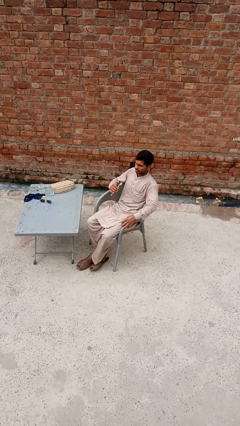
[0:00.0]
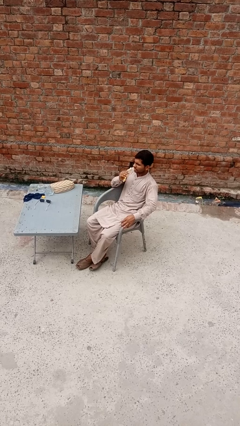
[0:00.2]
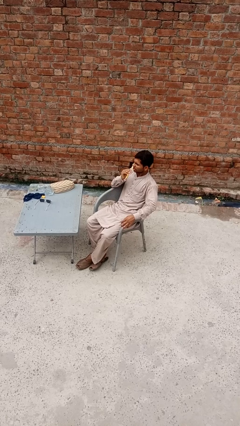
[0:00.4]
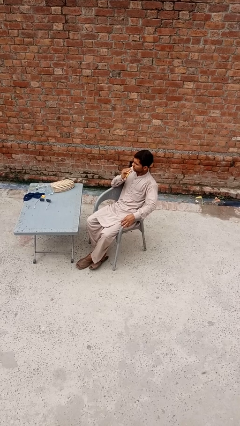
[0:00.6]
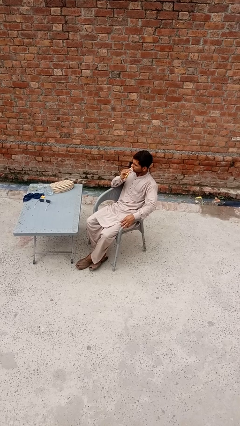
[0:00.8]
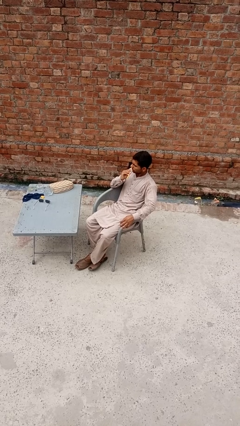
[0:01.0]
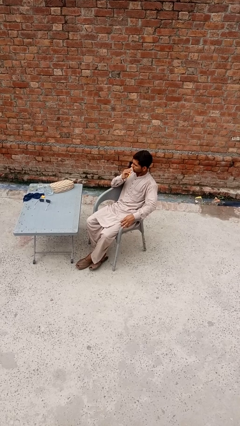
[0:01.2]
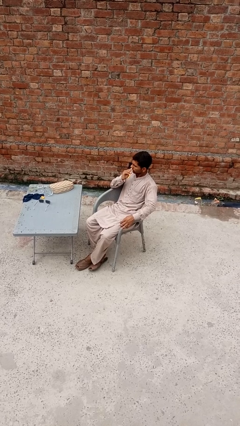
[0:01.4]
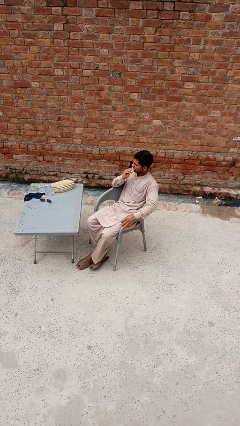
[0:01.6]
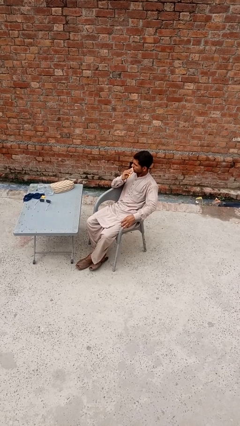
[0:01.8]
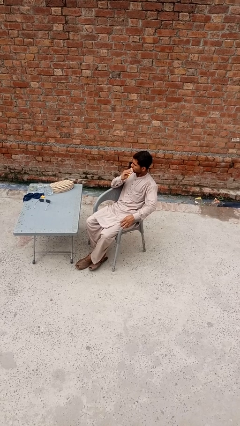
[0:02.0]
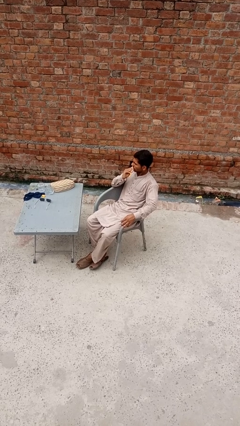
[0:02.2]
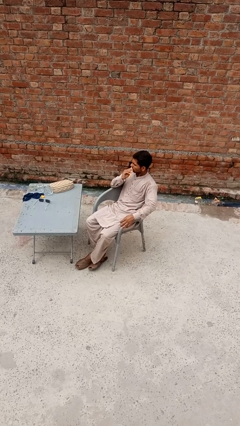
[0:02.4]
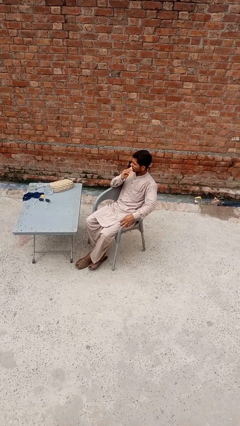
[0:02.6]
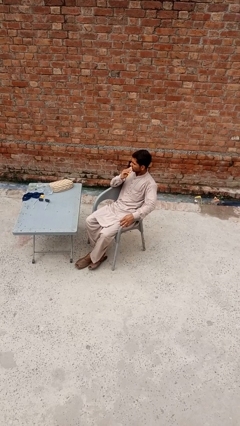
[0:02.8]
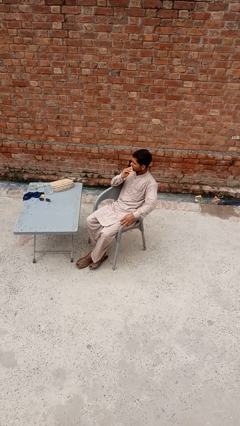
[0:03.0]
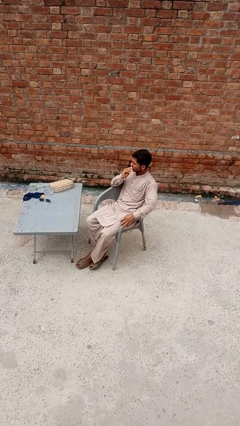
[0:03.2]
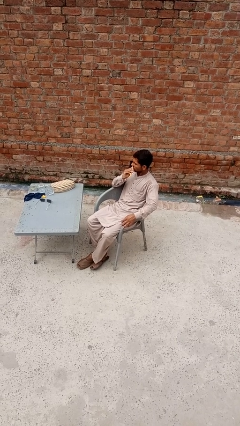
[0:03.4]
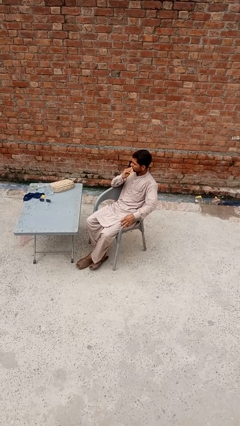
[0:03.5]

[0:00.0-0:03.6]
person brushes teeth

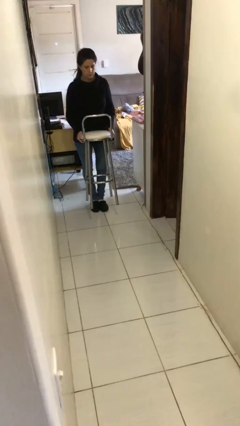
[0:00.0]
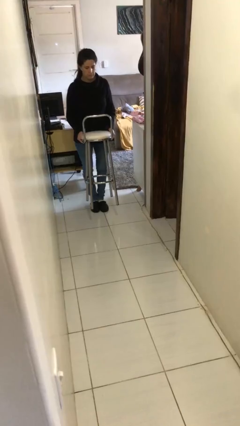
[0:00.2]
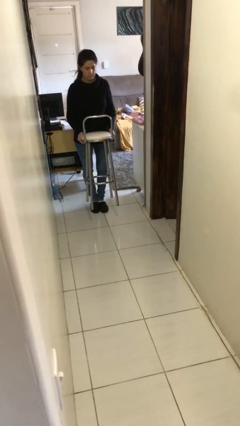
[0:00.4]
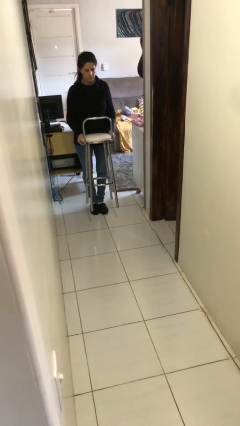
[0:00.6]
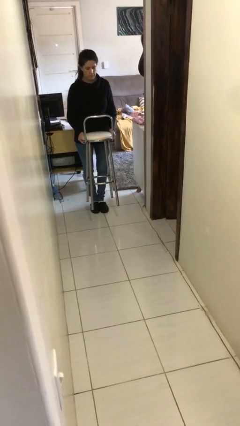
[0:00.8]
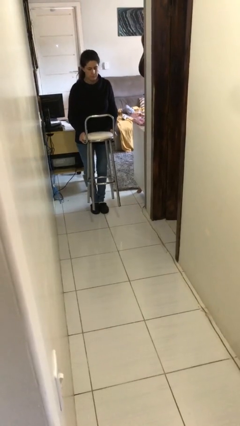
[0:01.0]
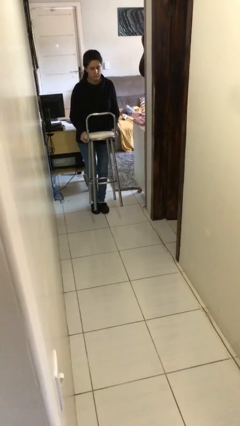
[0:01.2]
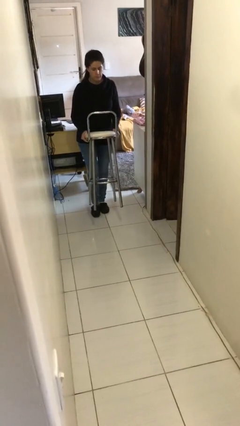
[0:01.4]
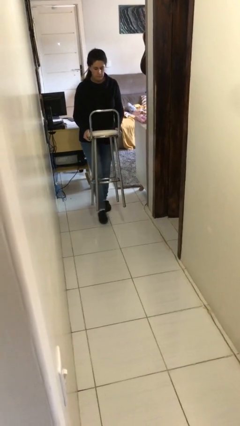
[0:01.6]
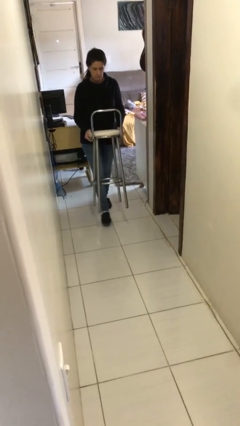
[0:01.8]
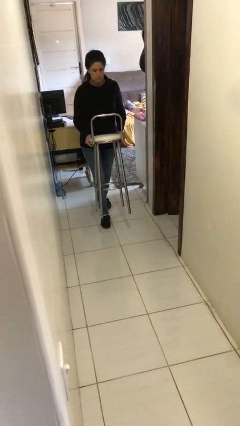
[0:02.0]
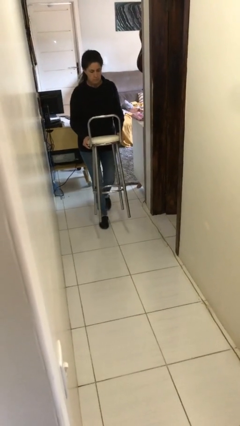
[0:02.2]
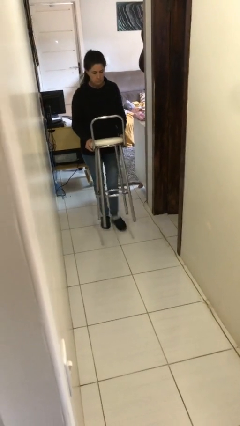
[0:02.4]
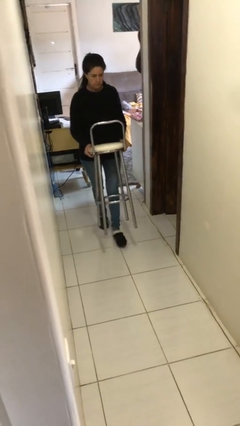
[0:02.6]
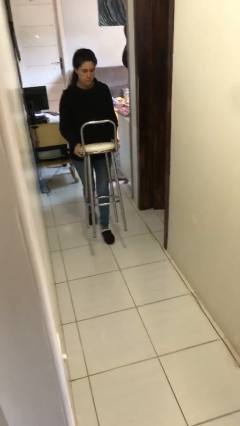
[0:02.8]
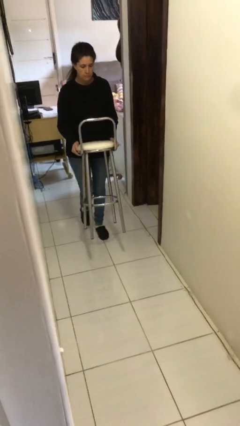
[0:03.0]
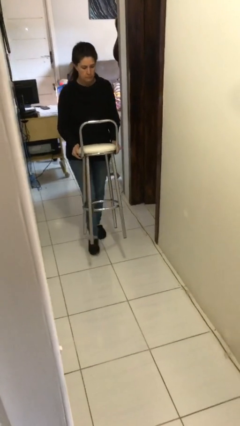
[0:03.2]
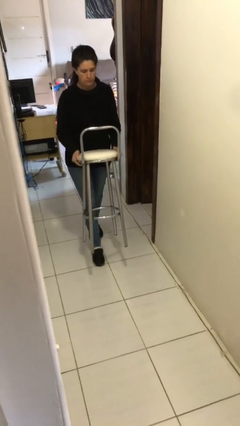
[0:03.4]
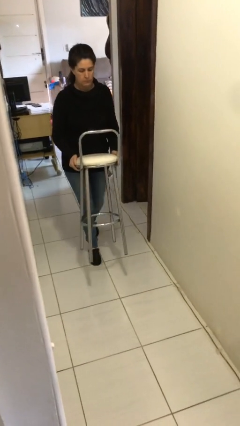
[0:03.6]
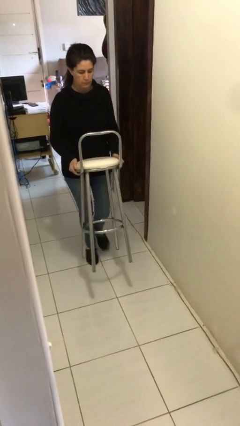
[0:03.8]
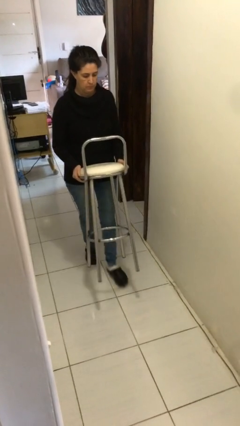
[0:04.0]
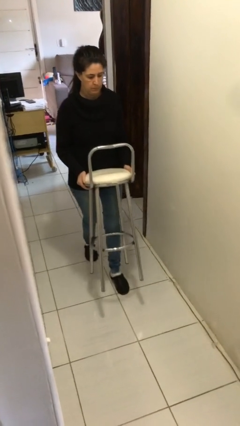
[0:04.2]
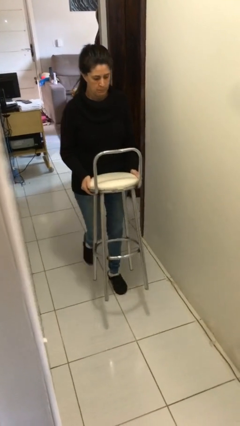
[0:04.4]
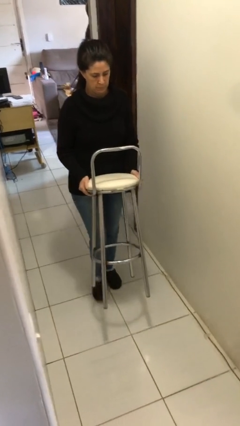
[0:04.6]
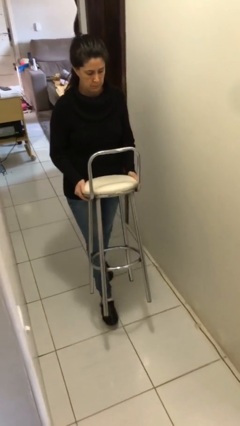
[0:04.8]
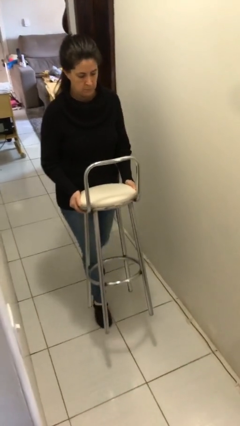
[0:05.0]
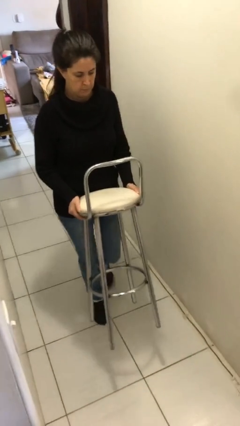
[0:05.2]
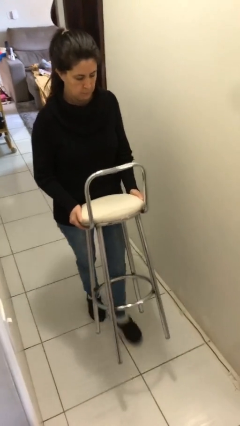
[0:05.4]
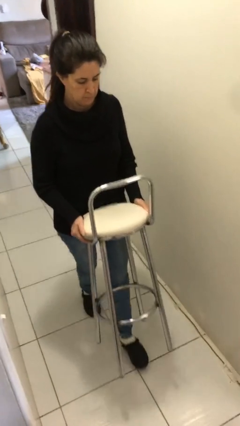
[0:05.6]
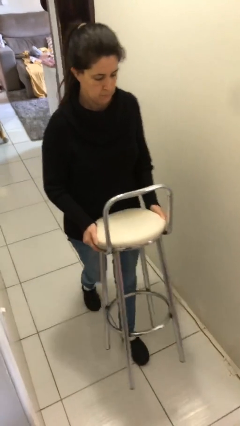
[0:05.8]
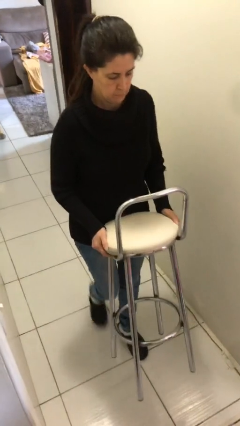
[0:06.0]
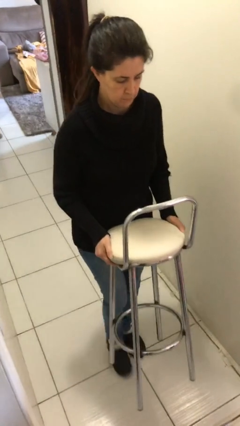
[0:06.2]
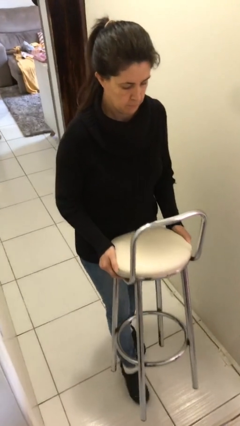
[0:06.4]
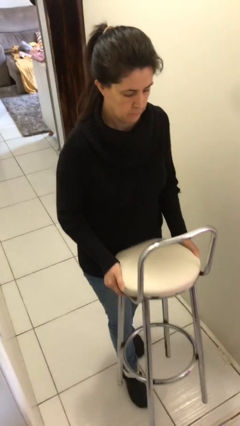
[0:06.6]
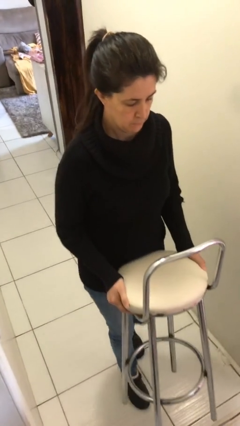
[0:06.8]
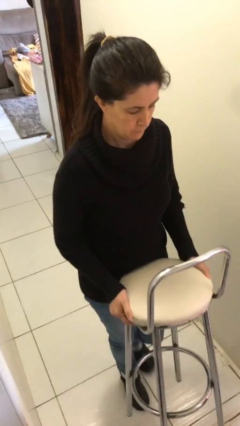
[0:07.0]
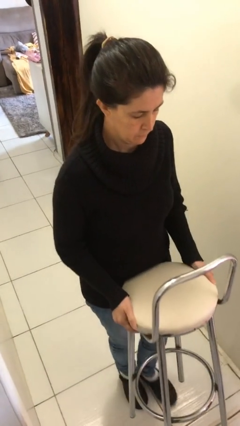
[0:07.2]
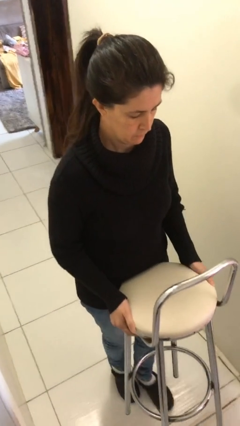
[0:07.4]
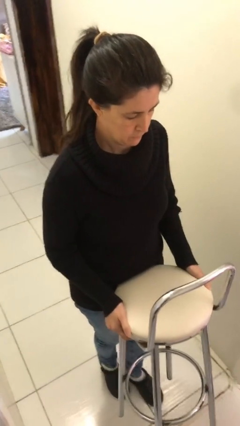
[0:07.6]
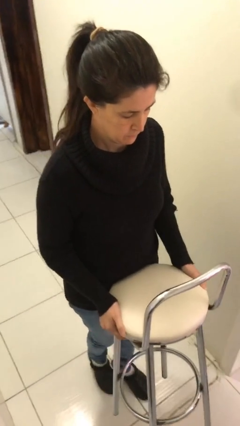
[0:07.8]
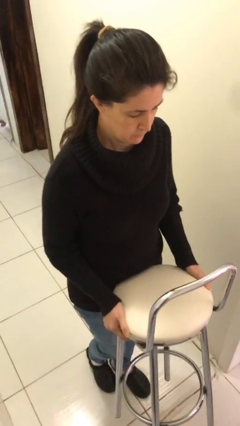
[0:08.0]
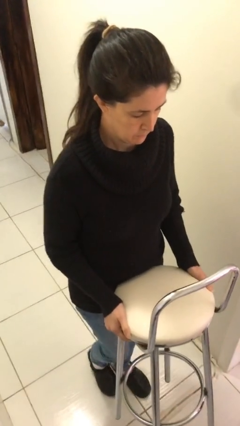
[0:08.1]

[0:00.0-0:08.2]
person carries heavy object

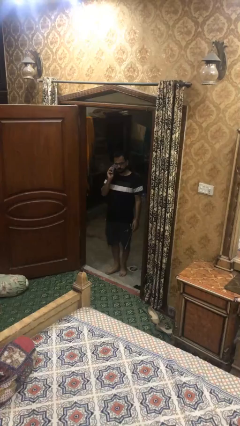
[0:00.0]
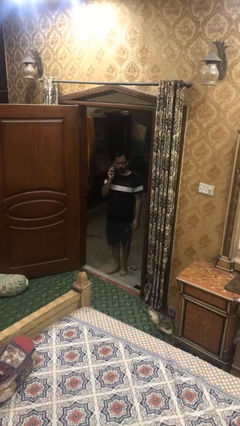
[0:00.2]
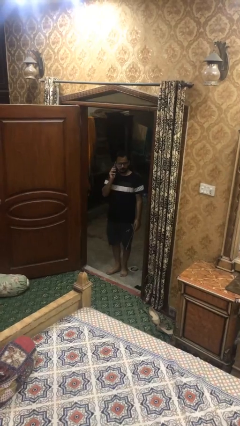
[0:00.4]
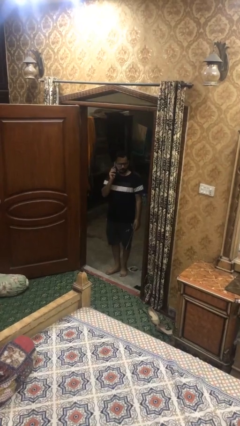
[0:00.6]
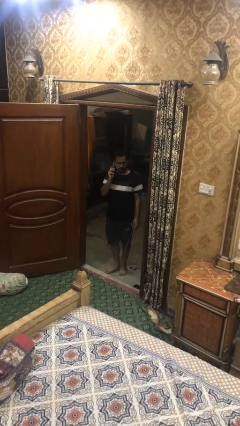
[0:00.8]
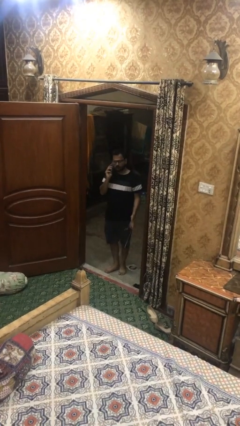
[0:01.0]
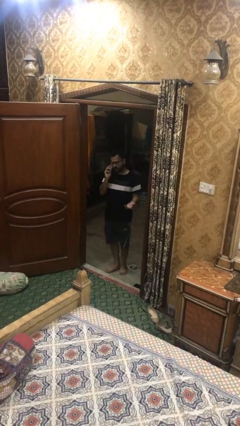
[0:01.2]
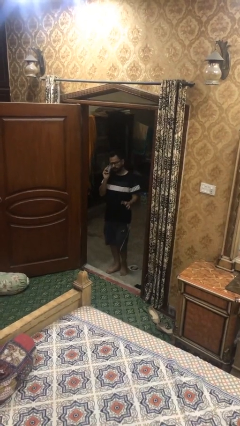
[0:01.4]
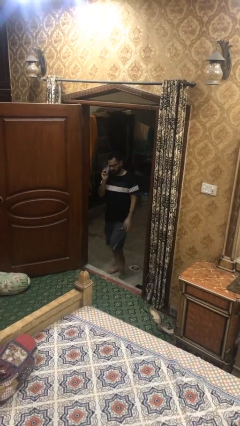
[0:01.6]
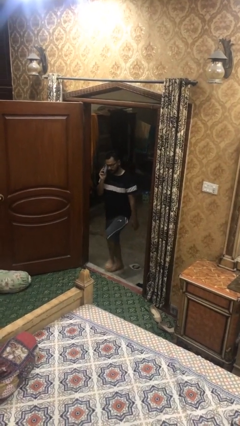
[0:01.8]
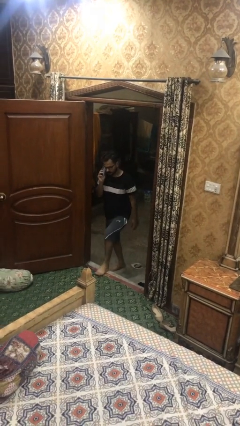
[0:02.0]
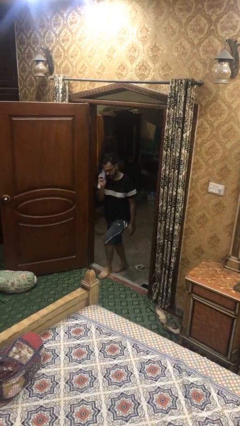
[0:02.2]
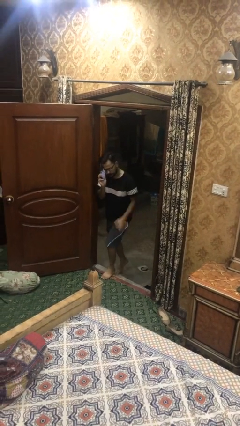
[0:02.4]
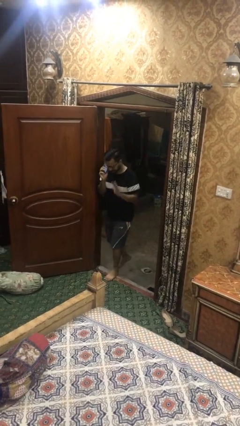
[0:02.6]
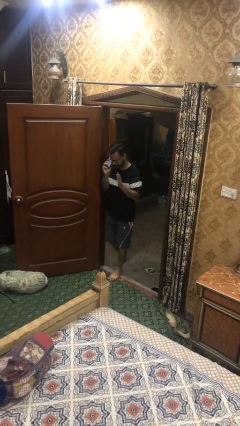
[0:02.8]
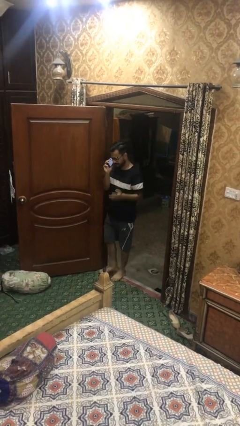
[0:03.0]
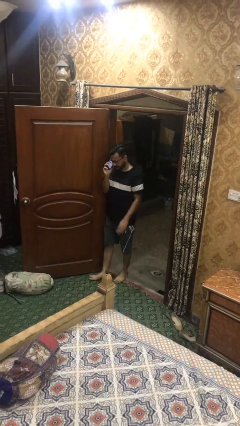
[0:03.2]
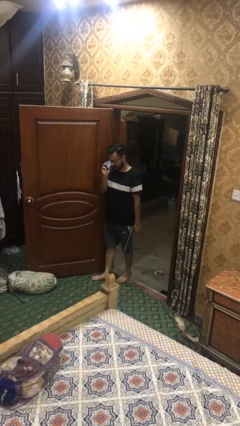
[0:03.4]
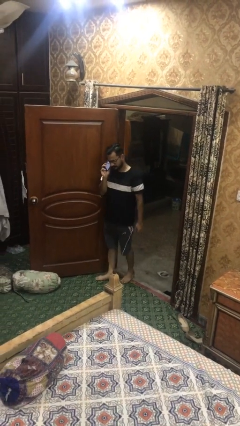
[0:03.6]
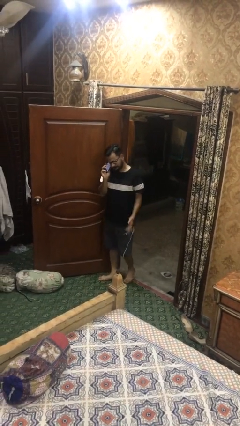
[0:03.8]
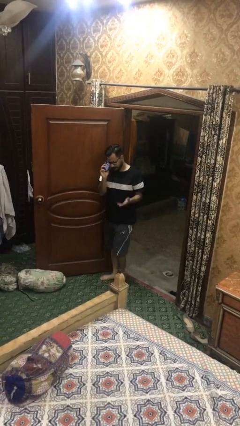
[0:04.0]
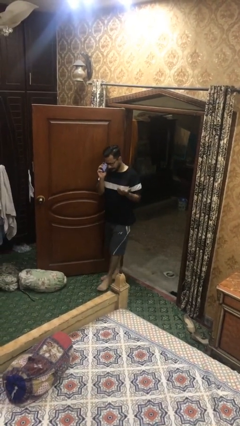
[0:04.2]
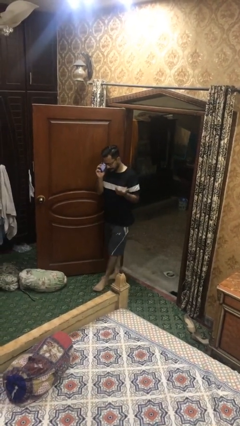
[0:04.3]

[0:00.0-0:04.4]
person enters scene through structure

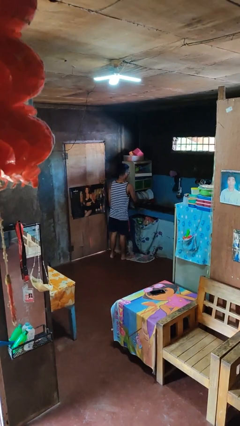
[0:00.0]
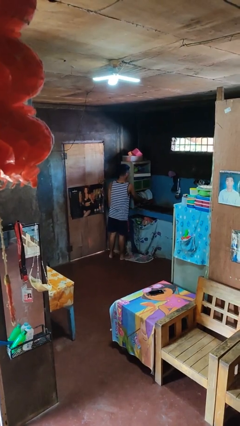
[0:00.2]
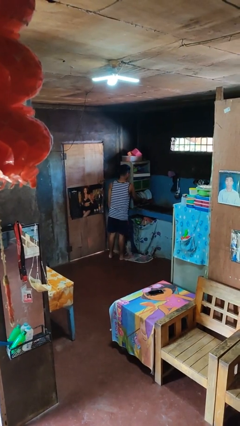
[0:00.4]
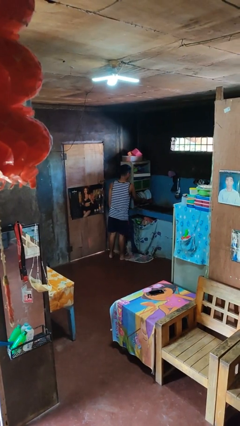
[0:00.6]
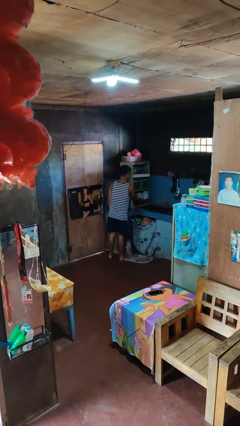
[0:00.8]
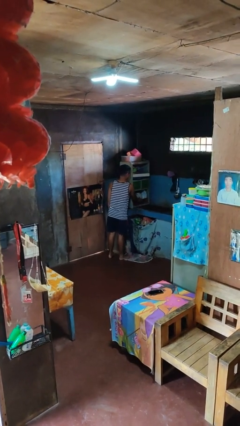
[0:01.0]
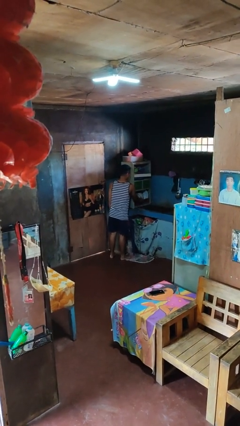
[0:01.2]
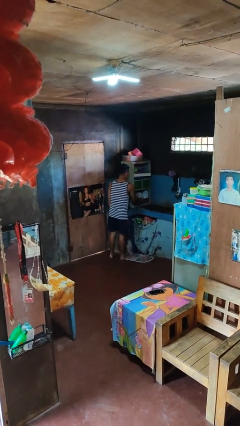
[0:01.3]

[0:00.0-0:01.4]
person closes dishwasher
